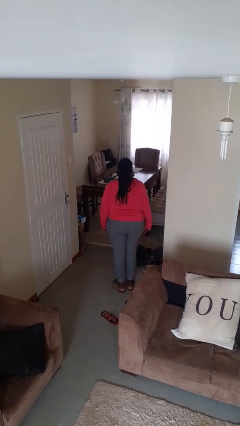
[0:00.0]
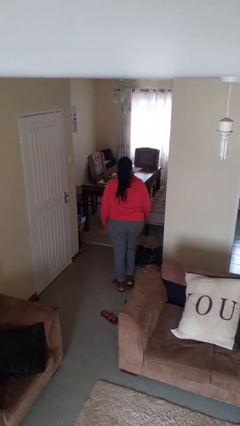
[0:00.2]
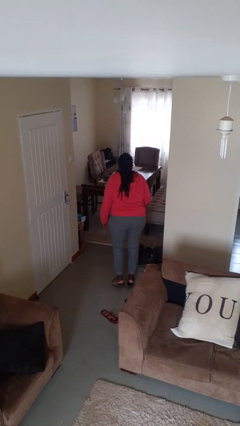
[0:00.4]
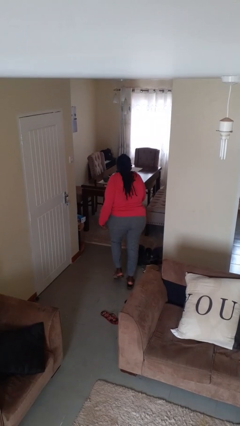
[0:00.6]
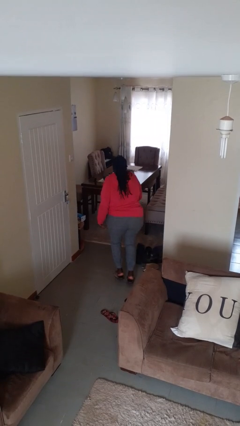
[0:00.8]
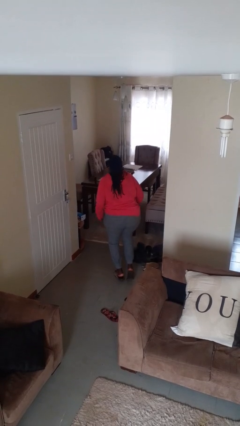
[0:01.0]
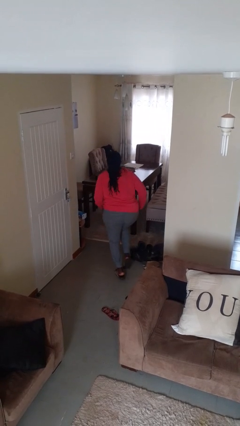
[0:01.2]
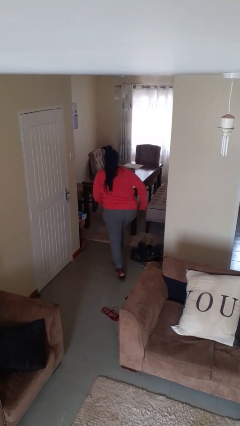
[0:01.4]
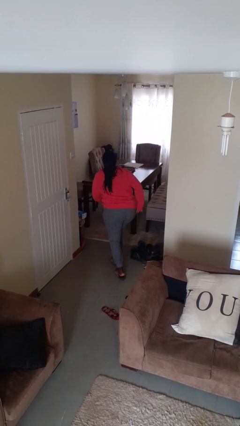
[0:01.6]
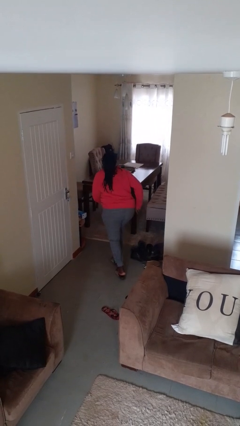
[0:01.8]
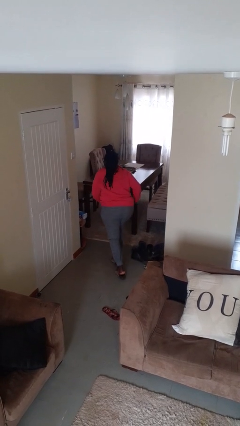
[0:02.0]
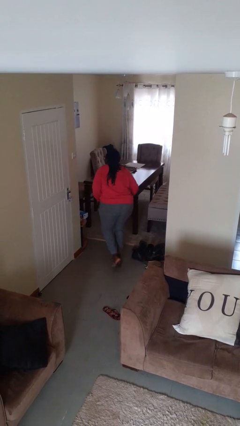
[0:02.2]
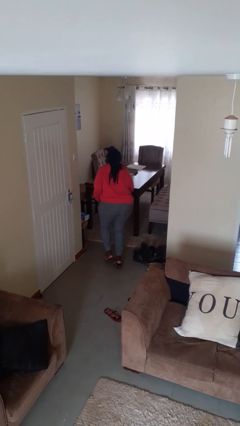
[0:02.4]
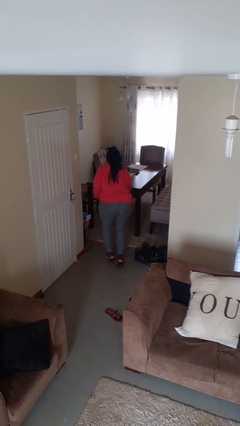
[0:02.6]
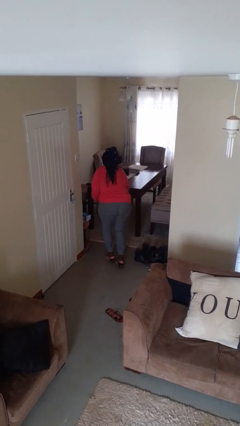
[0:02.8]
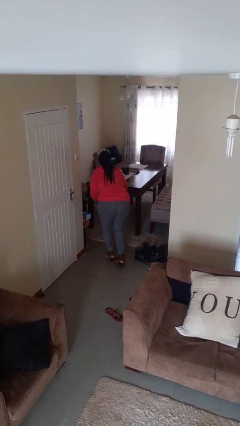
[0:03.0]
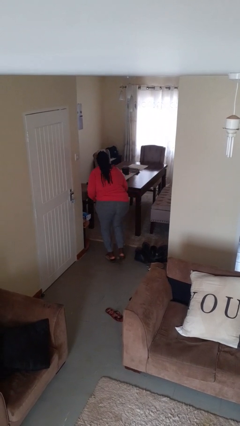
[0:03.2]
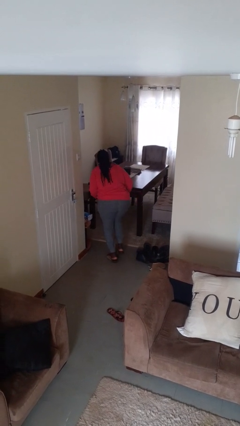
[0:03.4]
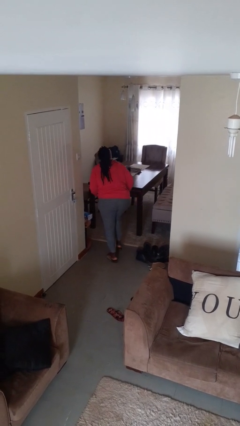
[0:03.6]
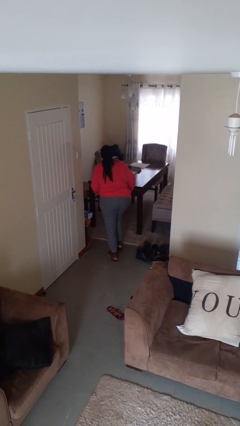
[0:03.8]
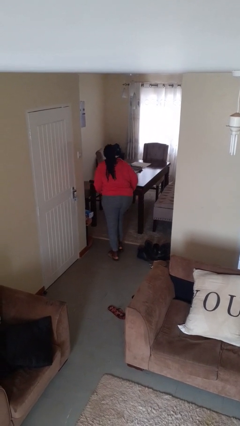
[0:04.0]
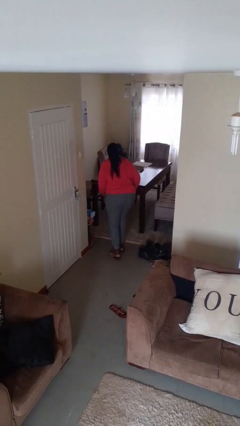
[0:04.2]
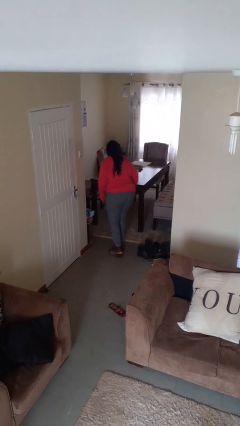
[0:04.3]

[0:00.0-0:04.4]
person walks tiptoe

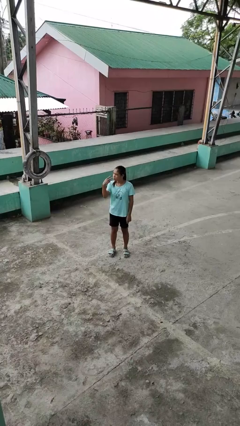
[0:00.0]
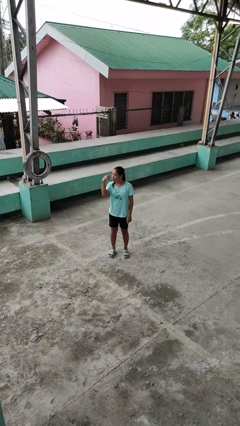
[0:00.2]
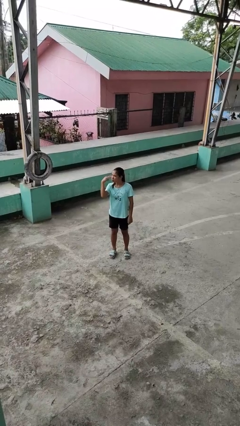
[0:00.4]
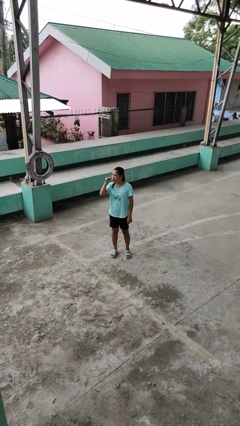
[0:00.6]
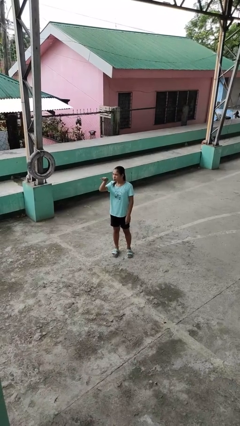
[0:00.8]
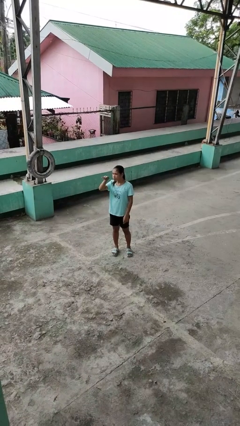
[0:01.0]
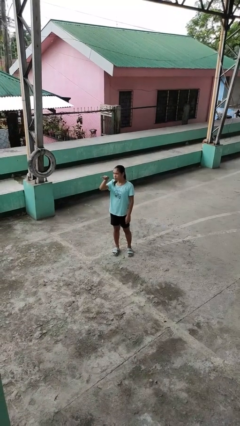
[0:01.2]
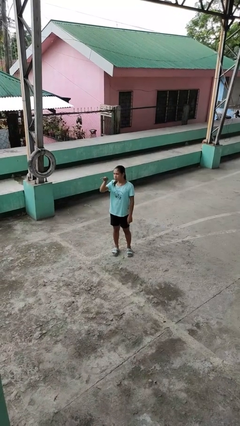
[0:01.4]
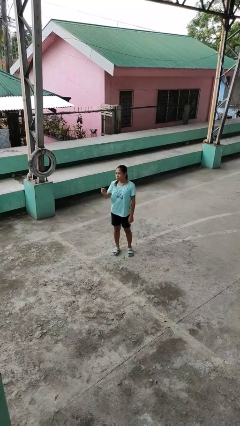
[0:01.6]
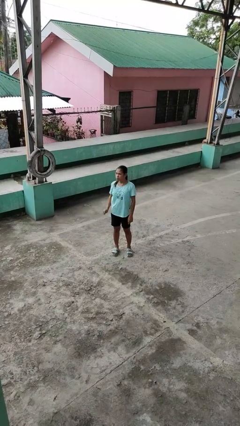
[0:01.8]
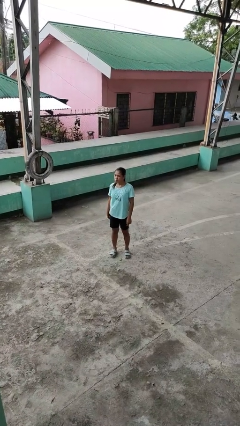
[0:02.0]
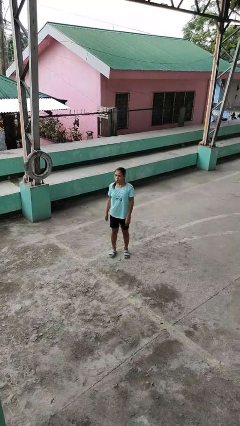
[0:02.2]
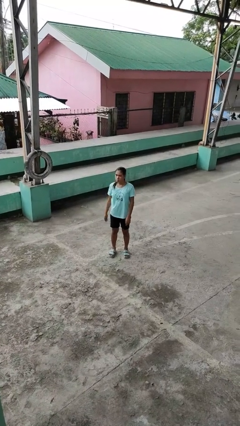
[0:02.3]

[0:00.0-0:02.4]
person gestures watch closely

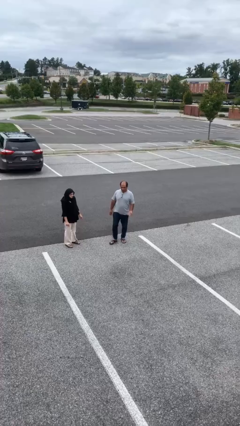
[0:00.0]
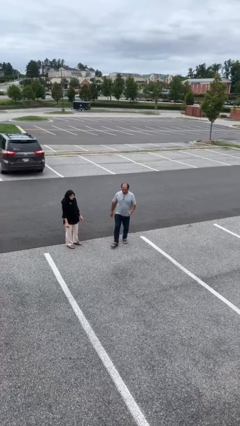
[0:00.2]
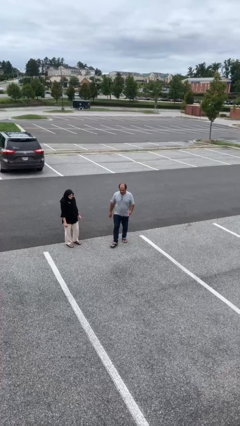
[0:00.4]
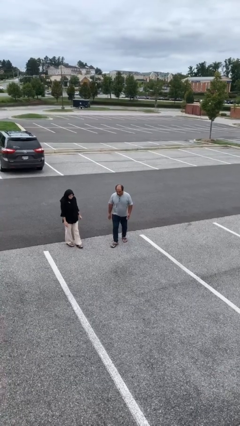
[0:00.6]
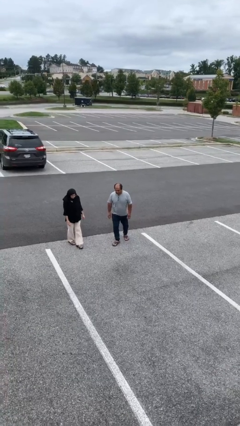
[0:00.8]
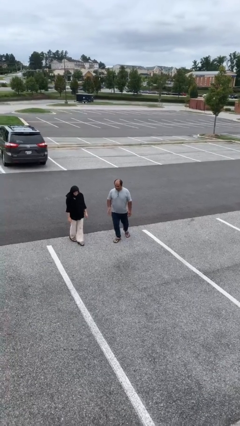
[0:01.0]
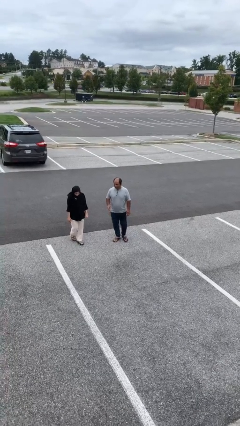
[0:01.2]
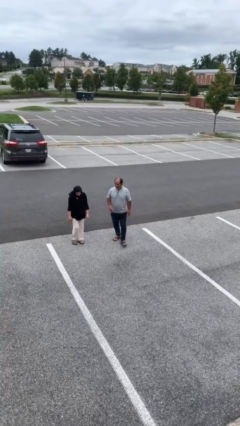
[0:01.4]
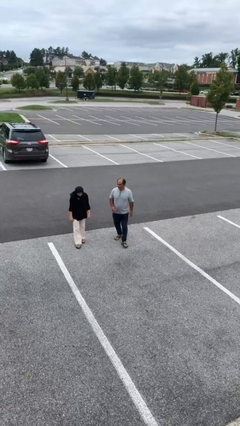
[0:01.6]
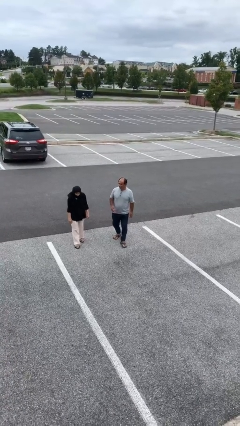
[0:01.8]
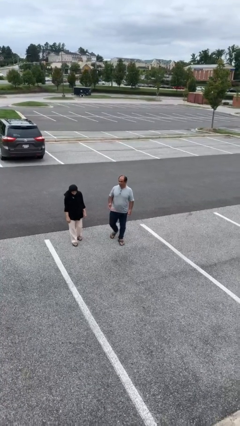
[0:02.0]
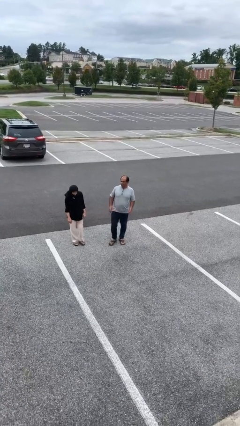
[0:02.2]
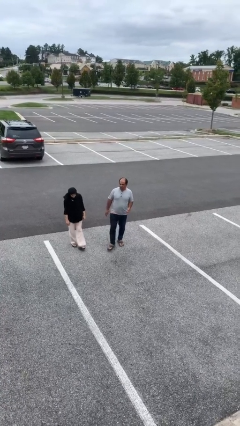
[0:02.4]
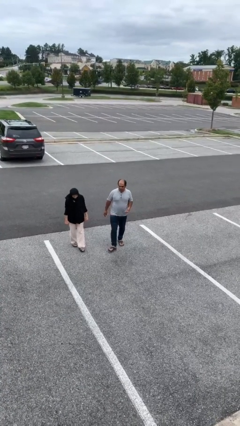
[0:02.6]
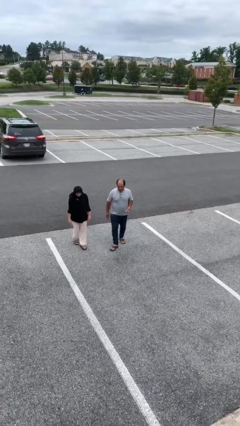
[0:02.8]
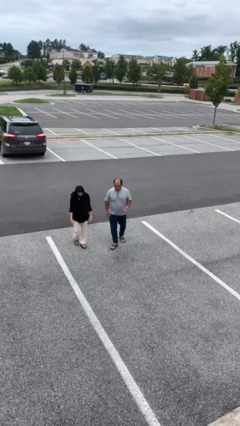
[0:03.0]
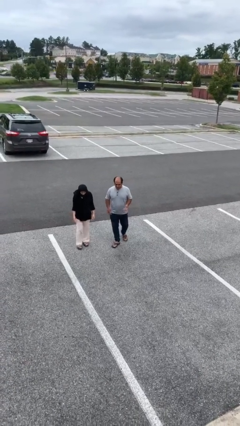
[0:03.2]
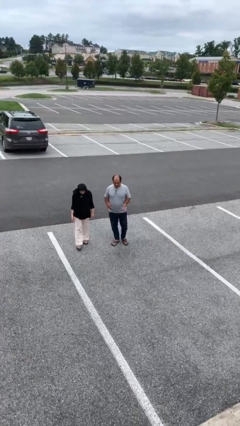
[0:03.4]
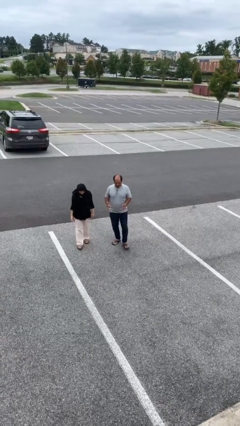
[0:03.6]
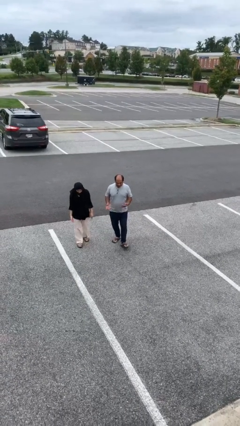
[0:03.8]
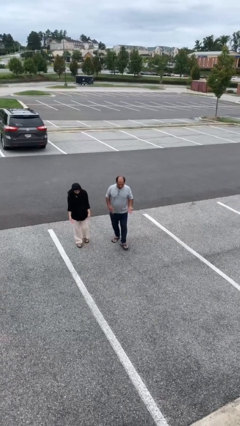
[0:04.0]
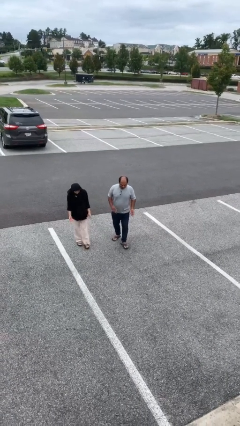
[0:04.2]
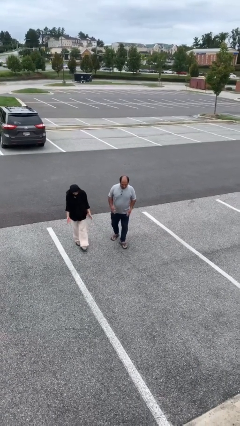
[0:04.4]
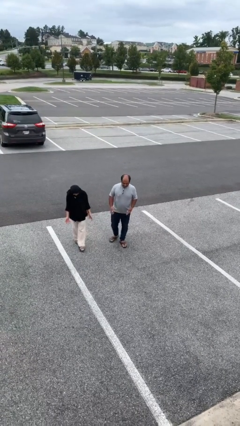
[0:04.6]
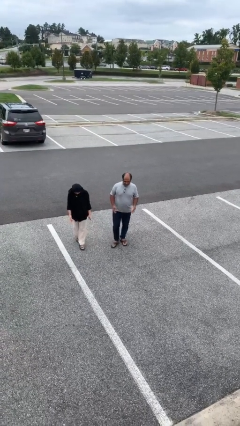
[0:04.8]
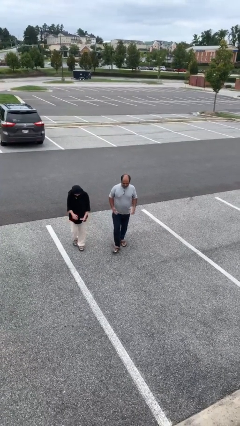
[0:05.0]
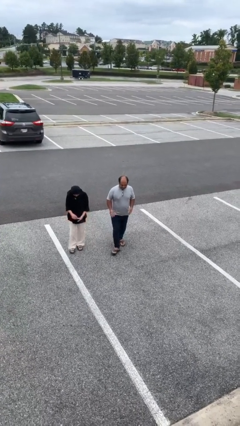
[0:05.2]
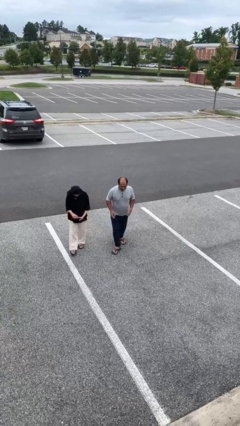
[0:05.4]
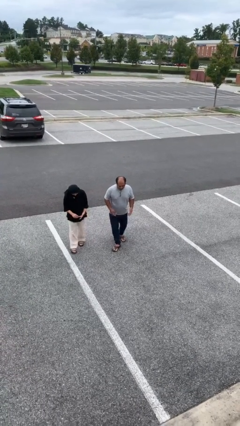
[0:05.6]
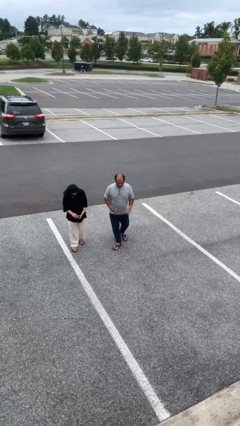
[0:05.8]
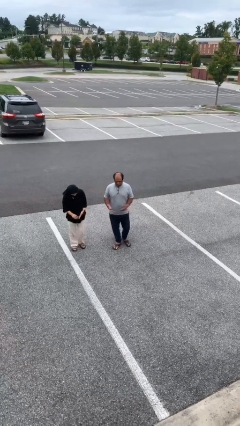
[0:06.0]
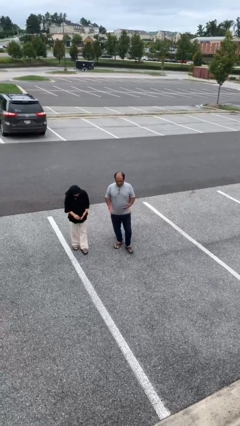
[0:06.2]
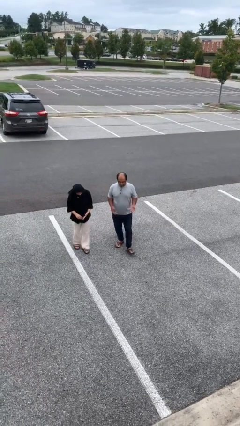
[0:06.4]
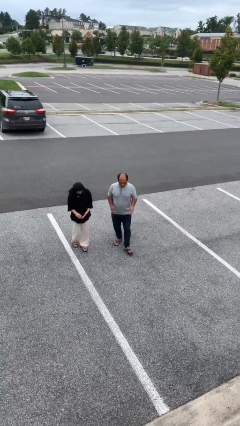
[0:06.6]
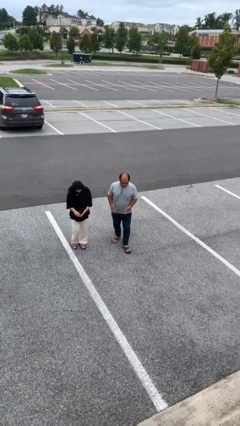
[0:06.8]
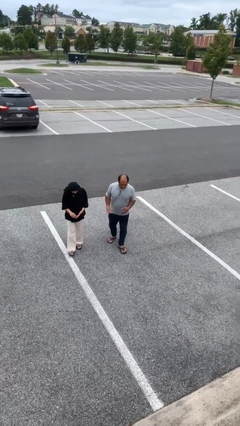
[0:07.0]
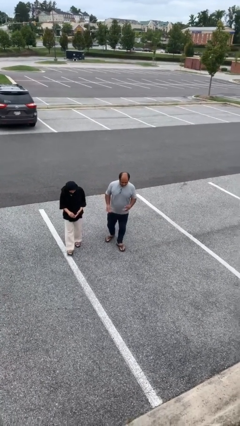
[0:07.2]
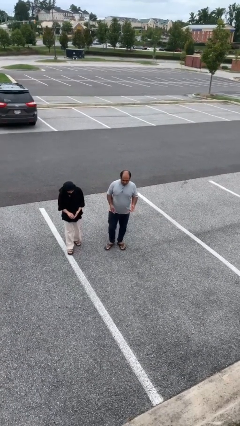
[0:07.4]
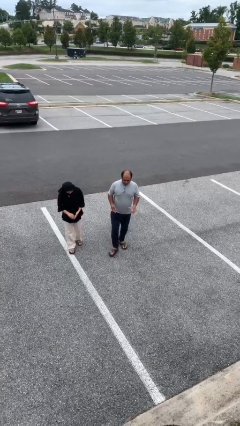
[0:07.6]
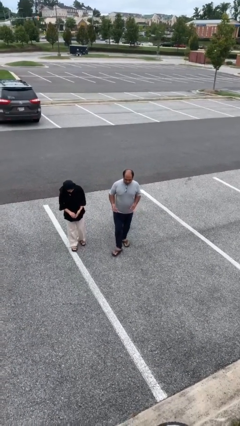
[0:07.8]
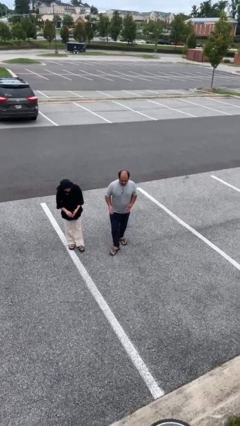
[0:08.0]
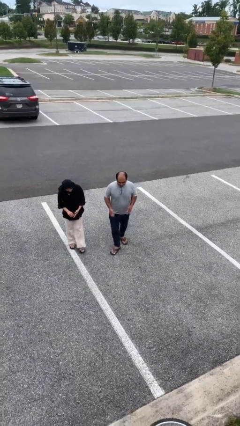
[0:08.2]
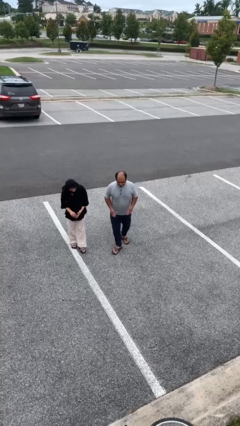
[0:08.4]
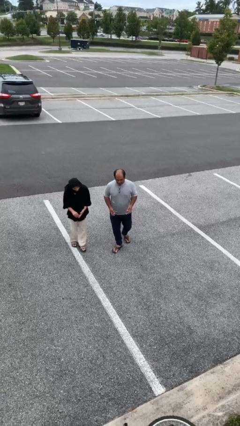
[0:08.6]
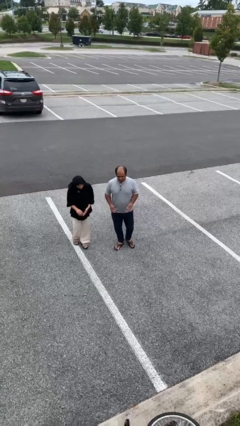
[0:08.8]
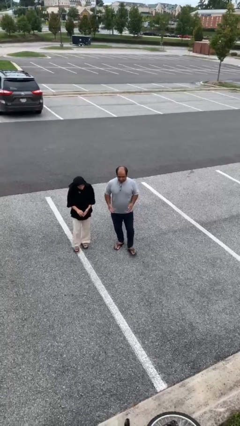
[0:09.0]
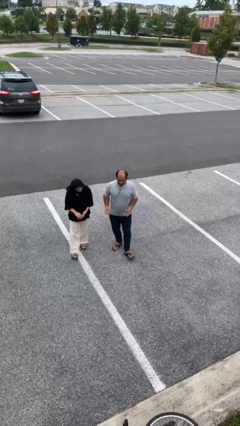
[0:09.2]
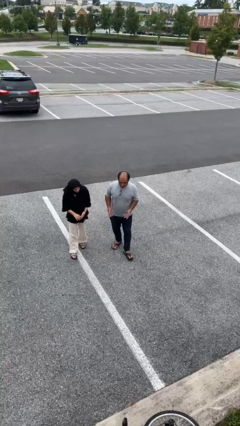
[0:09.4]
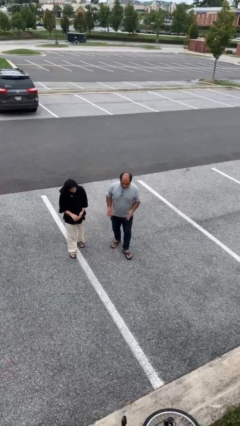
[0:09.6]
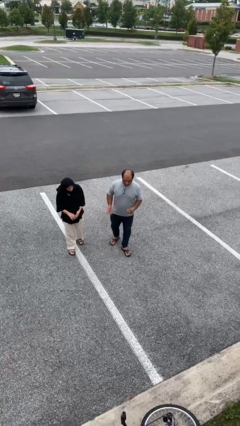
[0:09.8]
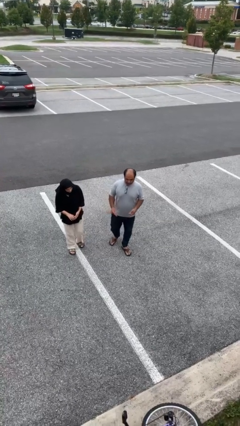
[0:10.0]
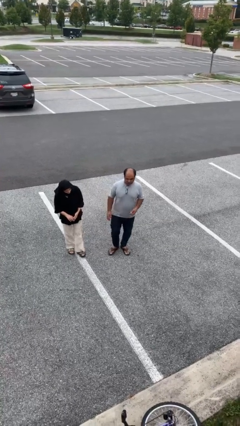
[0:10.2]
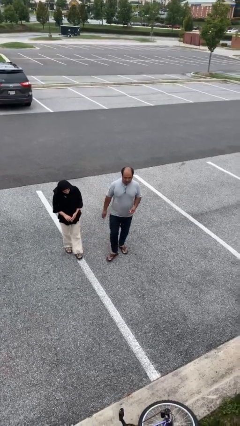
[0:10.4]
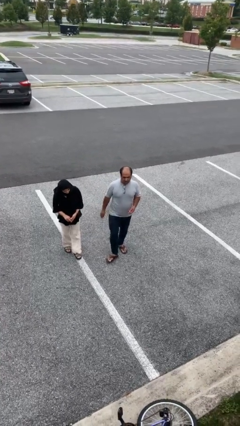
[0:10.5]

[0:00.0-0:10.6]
person talks to person
